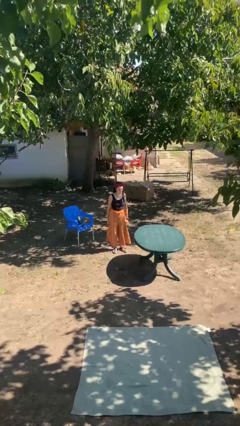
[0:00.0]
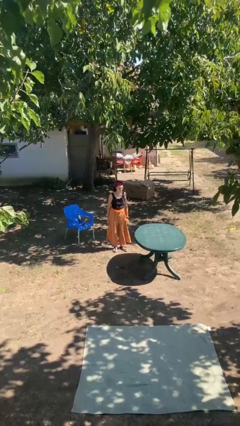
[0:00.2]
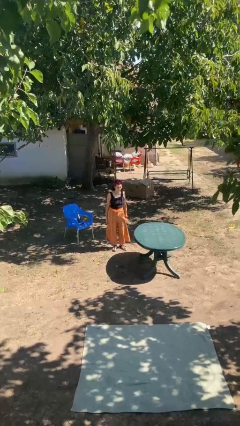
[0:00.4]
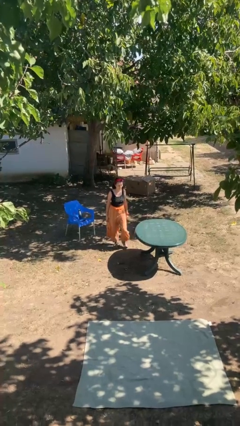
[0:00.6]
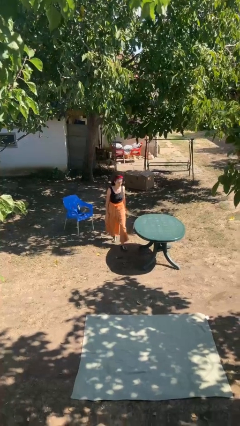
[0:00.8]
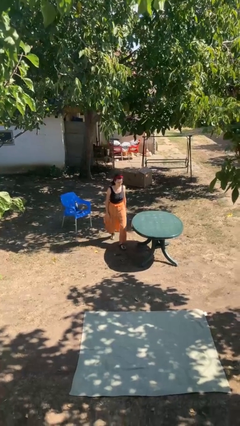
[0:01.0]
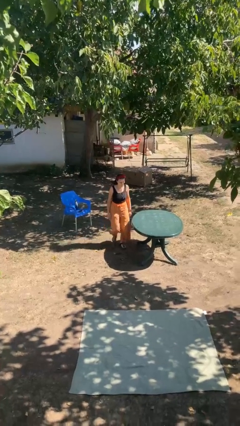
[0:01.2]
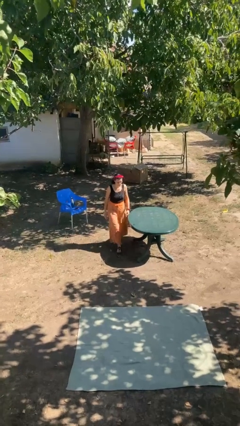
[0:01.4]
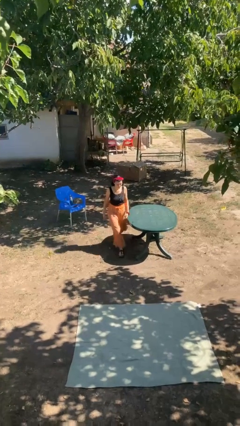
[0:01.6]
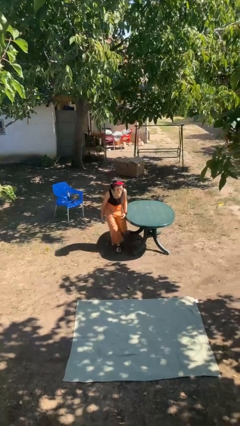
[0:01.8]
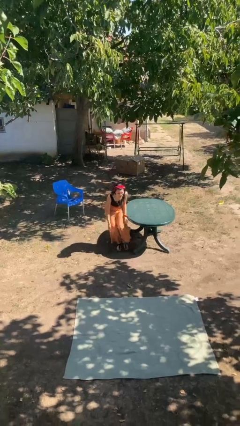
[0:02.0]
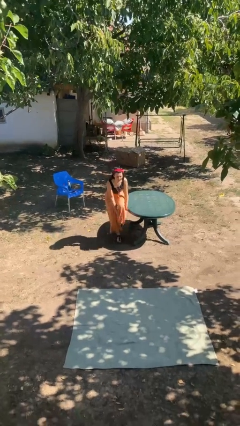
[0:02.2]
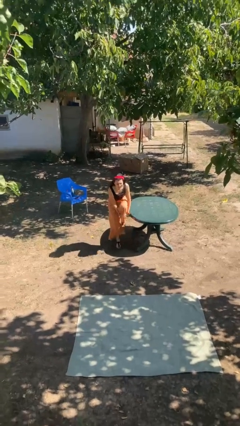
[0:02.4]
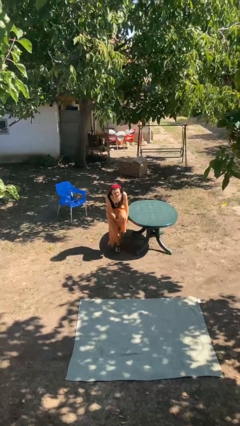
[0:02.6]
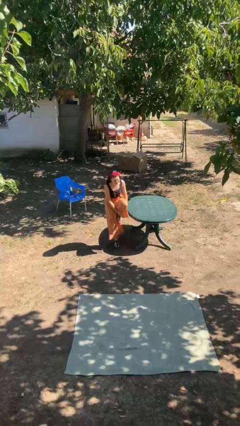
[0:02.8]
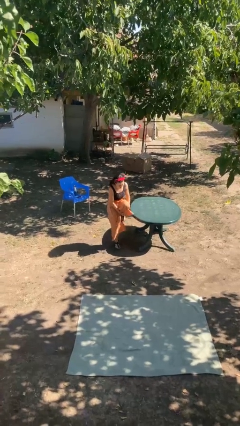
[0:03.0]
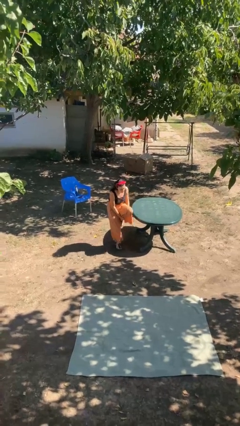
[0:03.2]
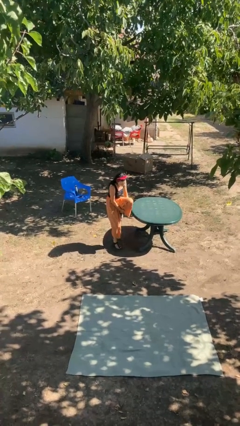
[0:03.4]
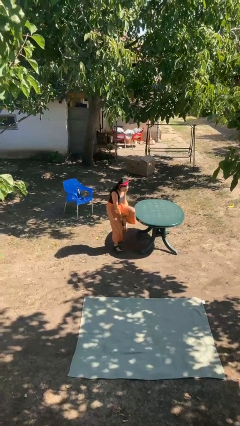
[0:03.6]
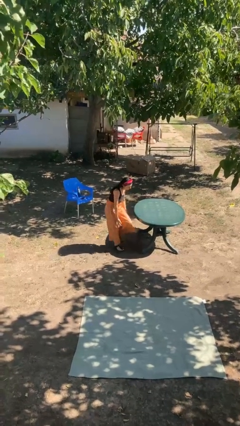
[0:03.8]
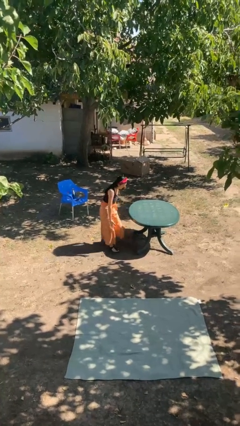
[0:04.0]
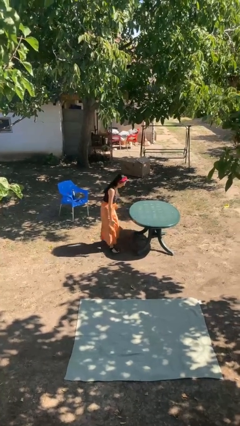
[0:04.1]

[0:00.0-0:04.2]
person bumps into table

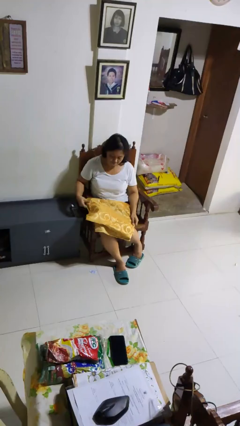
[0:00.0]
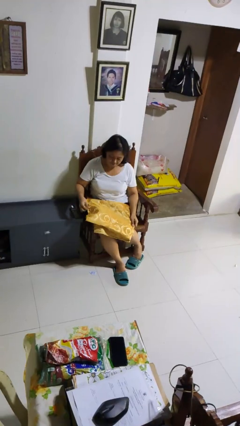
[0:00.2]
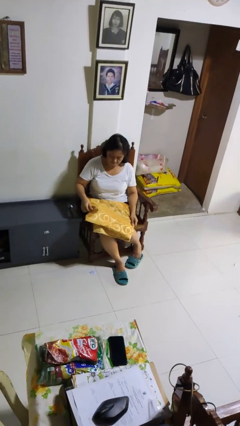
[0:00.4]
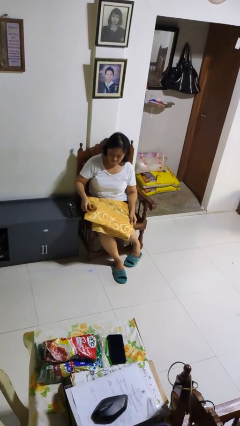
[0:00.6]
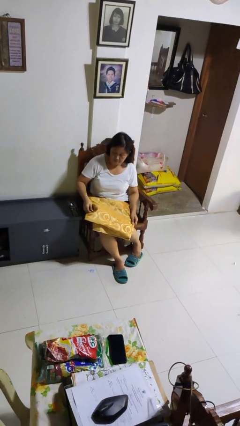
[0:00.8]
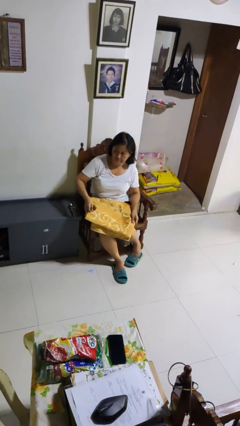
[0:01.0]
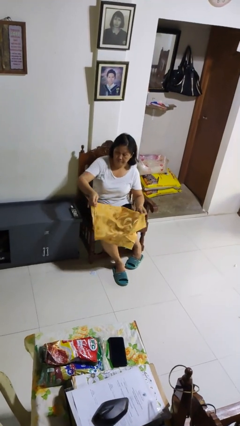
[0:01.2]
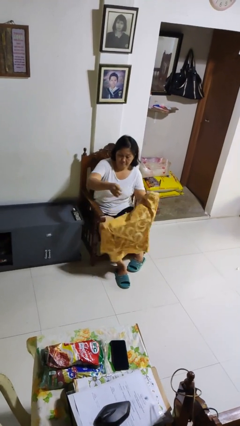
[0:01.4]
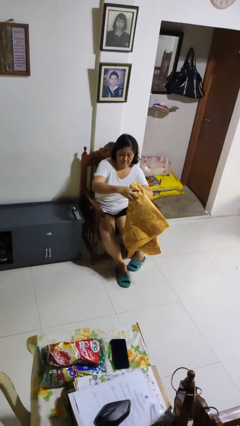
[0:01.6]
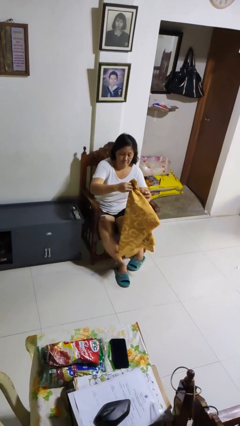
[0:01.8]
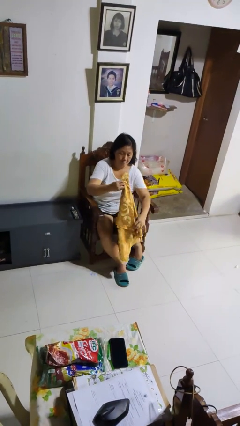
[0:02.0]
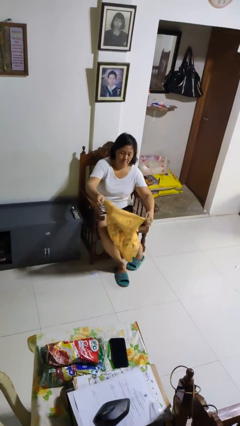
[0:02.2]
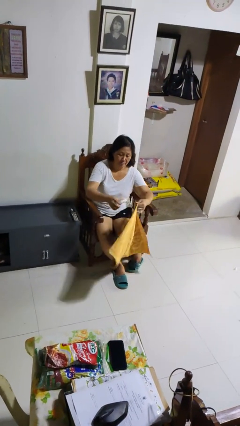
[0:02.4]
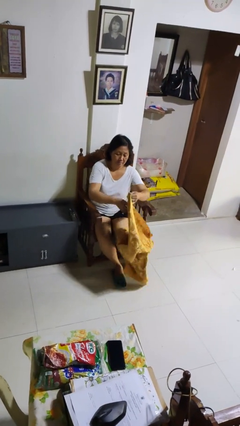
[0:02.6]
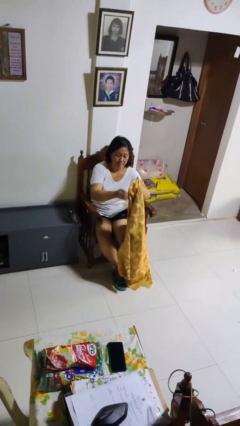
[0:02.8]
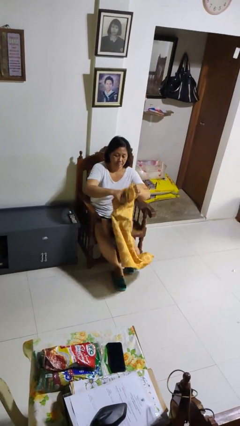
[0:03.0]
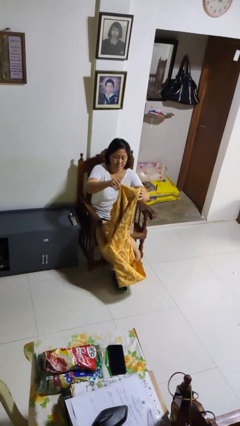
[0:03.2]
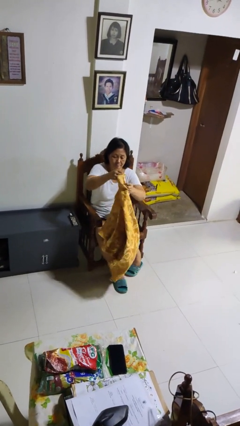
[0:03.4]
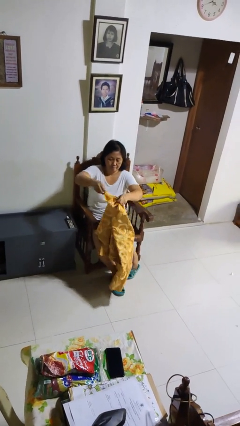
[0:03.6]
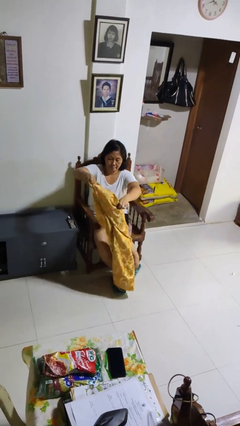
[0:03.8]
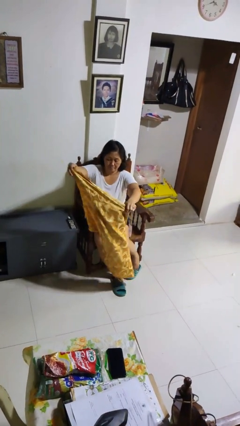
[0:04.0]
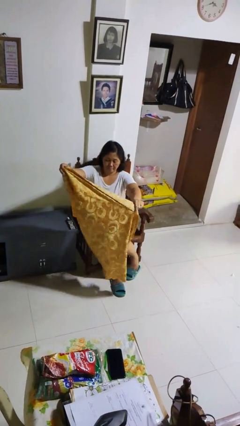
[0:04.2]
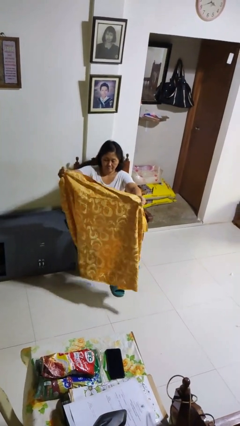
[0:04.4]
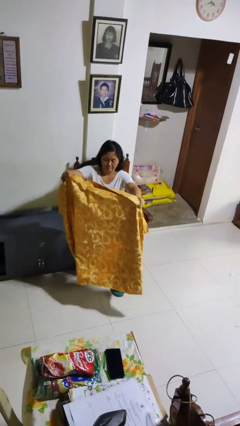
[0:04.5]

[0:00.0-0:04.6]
person unfolds blanket

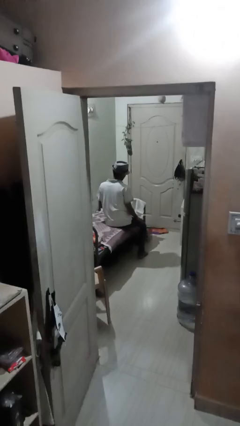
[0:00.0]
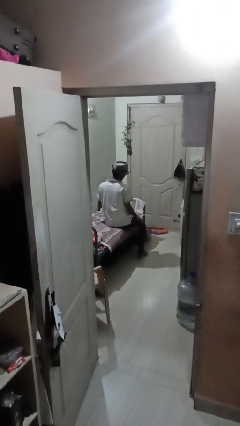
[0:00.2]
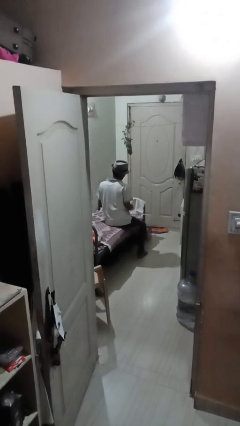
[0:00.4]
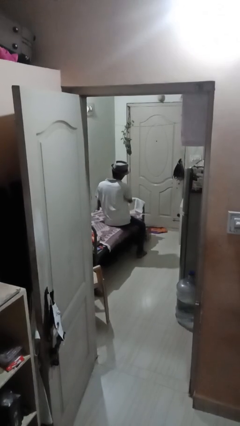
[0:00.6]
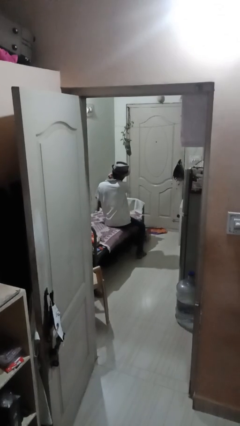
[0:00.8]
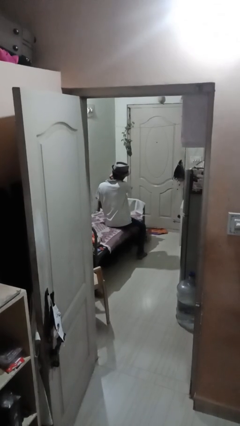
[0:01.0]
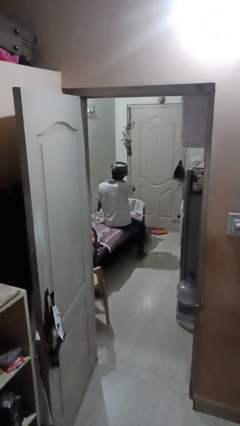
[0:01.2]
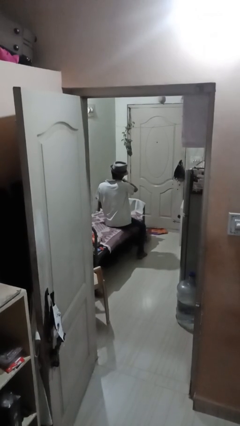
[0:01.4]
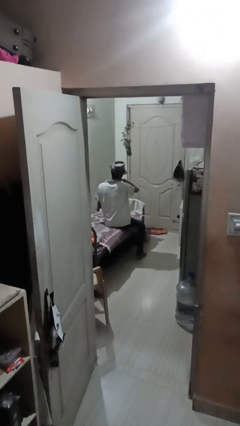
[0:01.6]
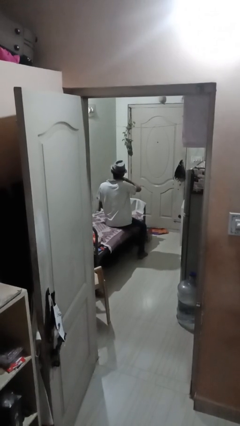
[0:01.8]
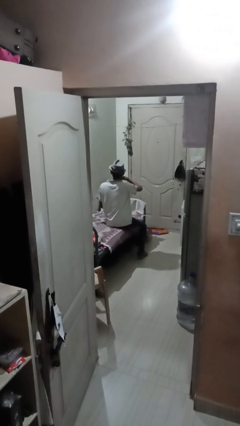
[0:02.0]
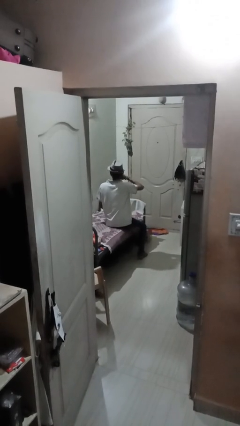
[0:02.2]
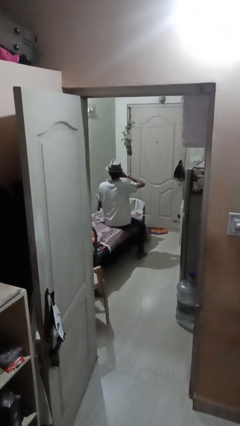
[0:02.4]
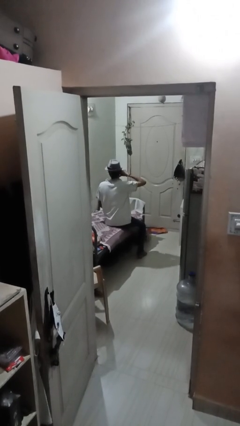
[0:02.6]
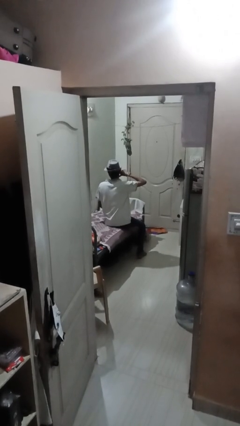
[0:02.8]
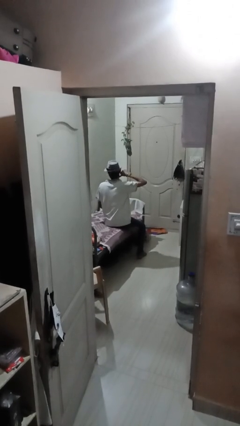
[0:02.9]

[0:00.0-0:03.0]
person gestures cut

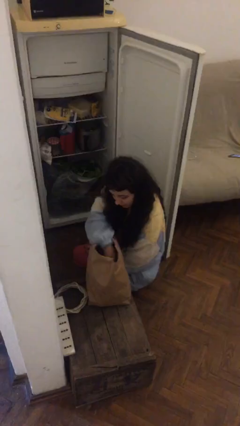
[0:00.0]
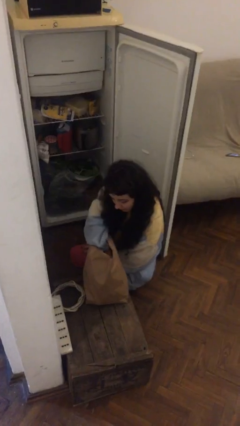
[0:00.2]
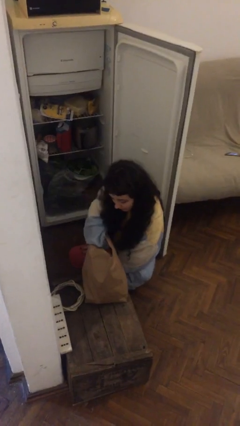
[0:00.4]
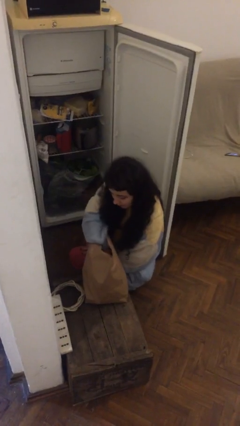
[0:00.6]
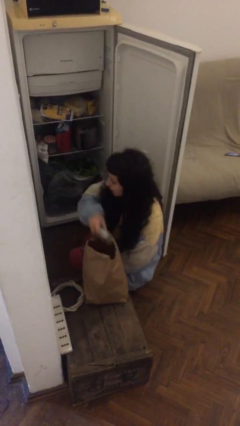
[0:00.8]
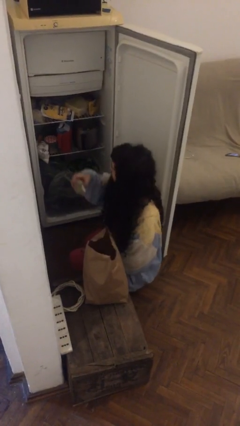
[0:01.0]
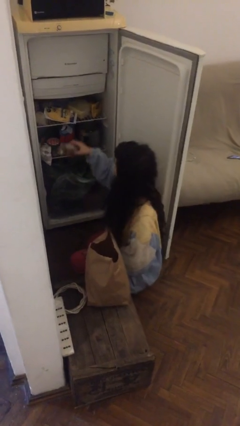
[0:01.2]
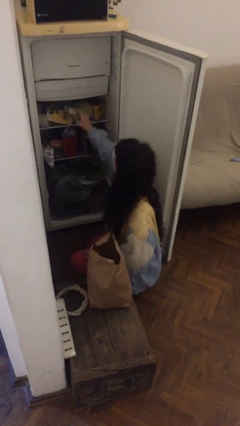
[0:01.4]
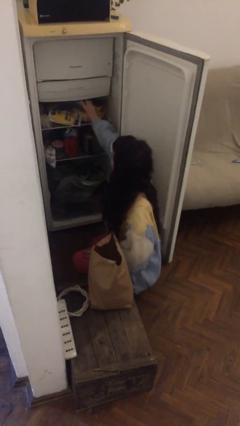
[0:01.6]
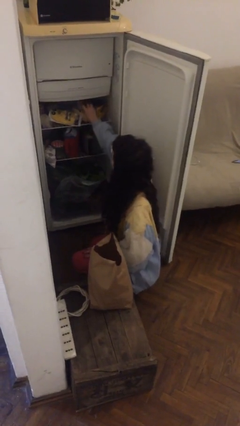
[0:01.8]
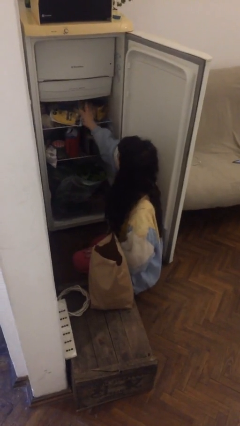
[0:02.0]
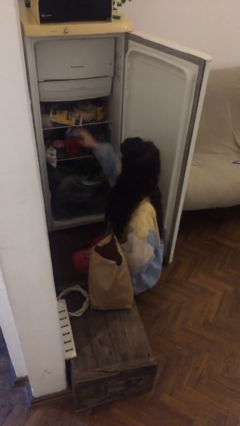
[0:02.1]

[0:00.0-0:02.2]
person loads groceries into refrigerator

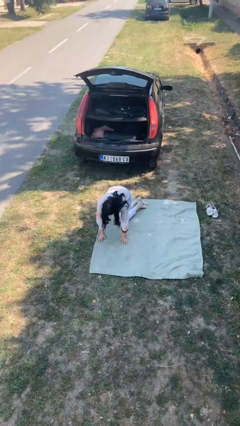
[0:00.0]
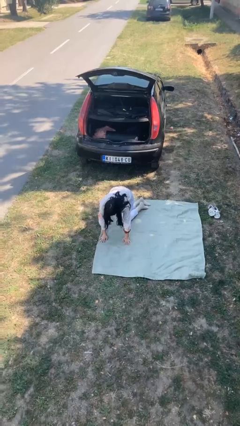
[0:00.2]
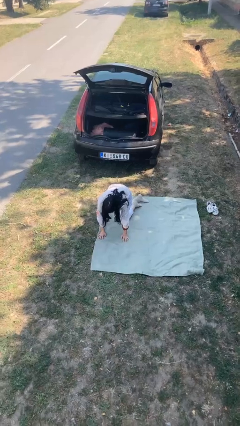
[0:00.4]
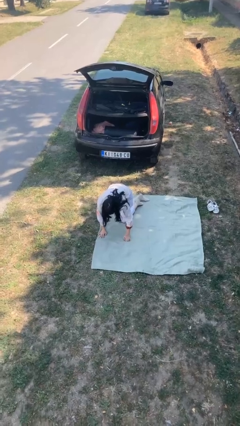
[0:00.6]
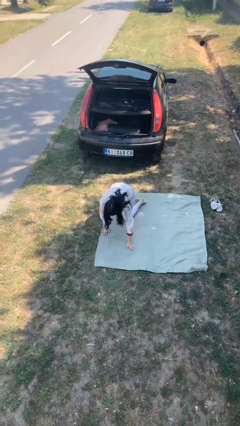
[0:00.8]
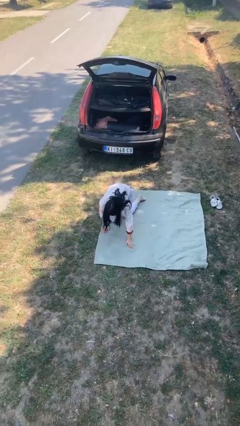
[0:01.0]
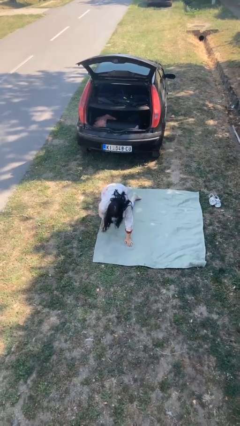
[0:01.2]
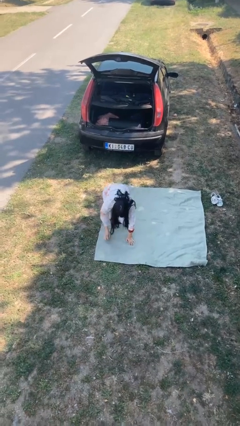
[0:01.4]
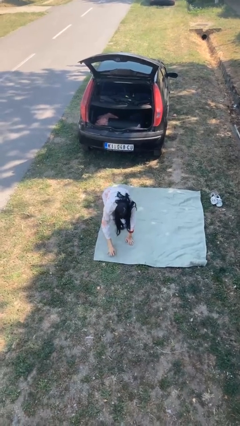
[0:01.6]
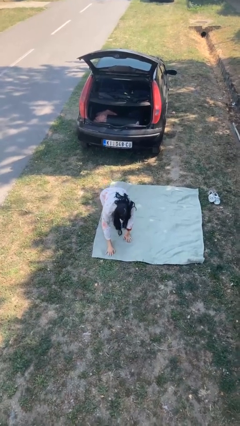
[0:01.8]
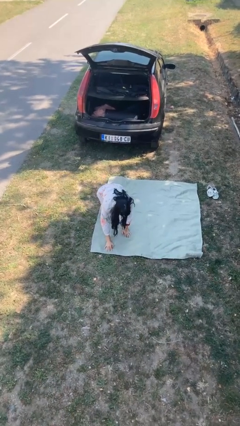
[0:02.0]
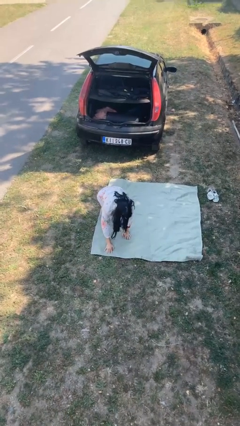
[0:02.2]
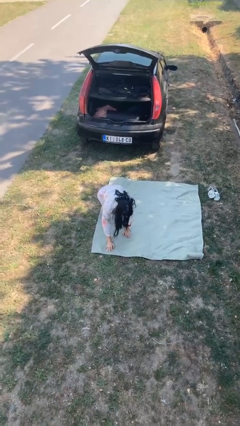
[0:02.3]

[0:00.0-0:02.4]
person crawls

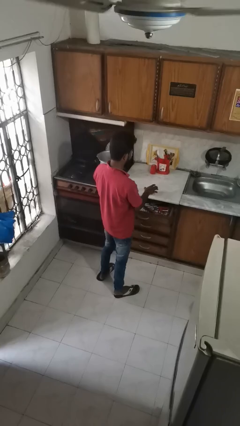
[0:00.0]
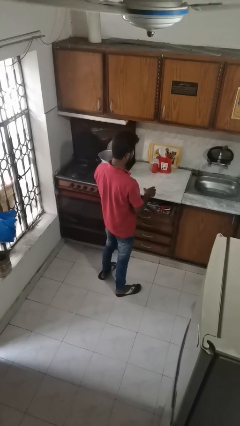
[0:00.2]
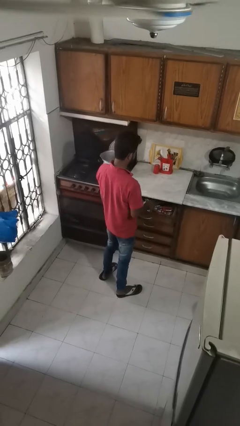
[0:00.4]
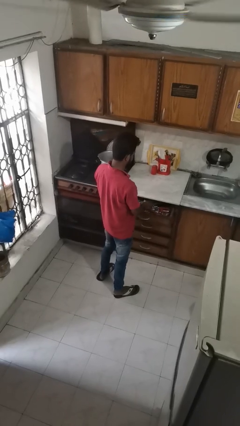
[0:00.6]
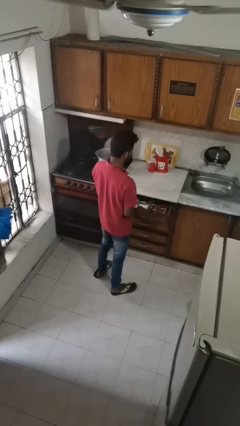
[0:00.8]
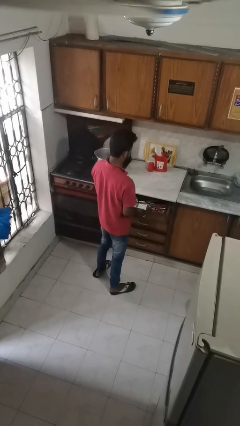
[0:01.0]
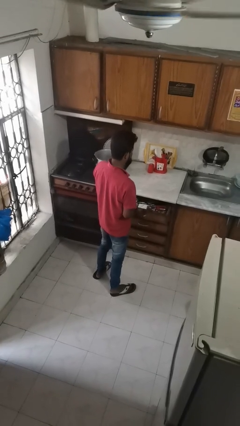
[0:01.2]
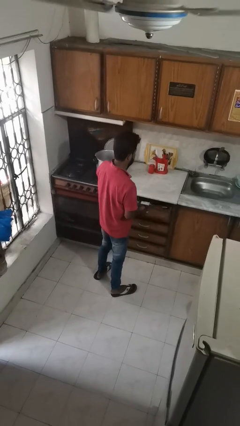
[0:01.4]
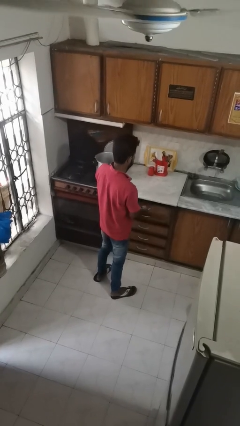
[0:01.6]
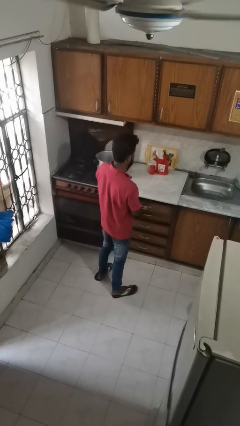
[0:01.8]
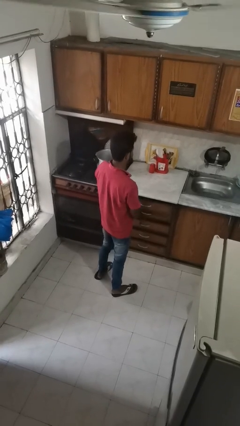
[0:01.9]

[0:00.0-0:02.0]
person puts object into kitchen drawer
